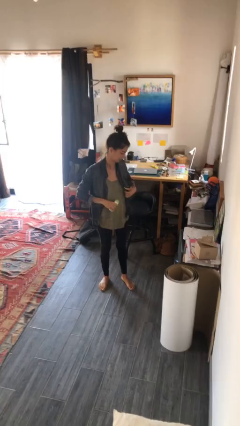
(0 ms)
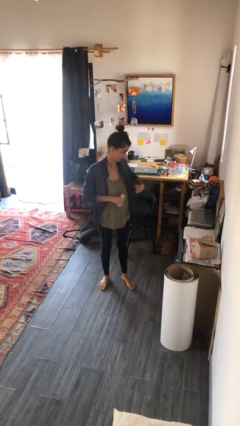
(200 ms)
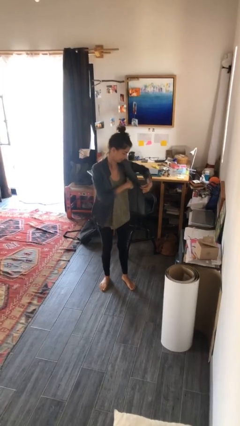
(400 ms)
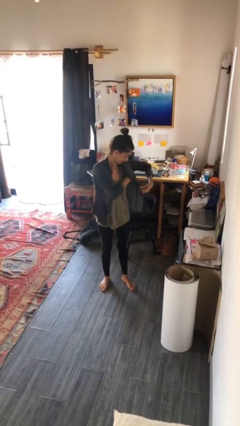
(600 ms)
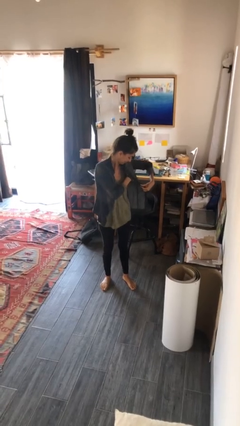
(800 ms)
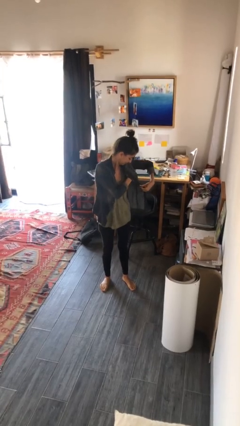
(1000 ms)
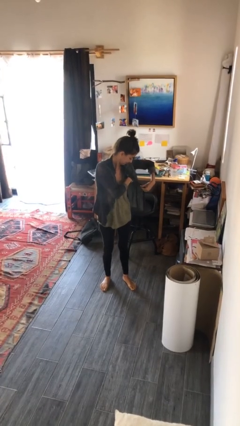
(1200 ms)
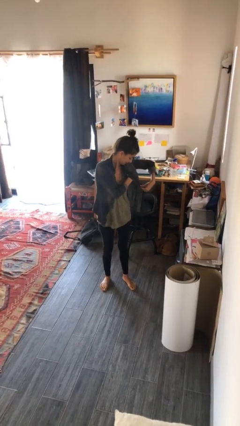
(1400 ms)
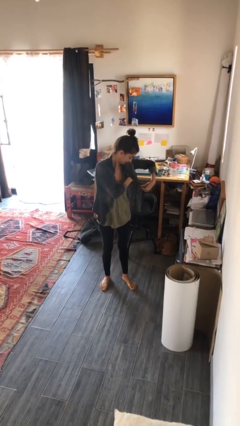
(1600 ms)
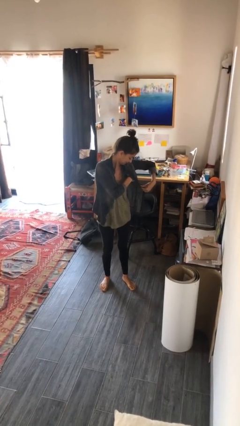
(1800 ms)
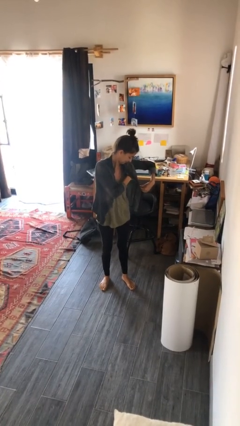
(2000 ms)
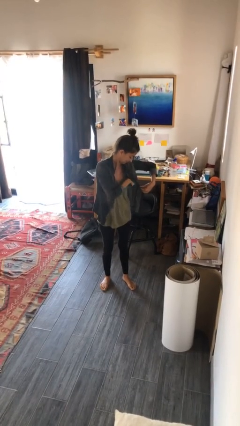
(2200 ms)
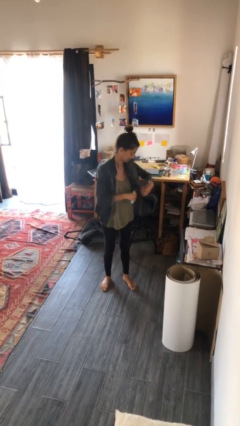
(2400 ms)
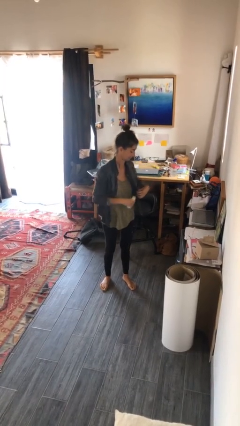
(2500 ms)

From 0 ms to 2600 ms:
person applies deodorant

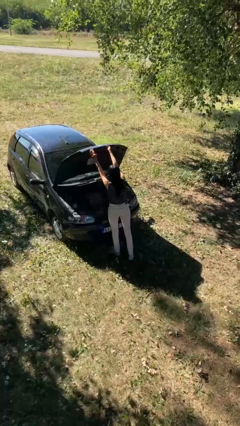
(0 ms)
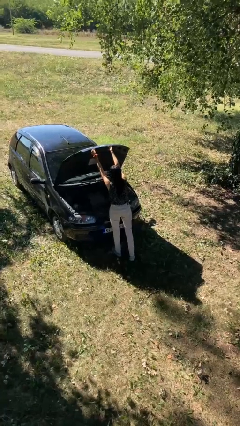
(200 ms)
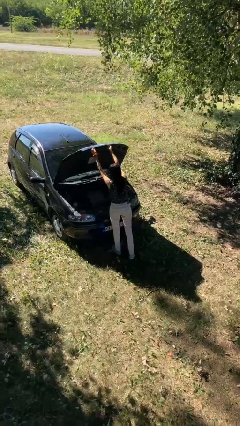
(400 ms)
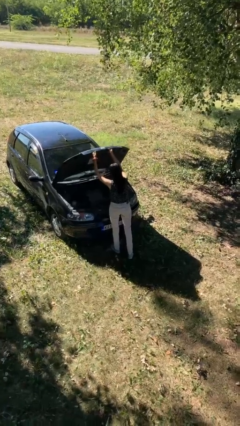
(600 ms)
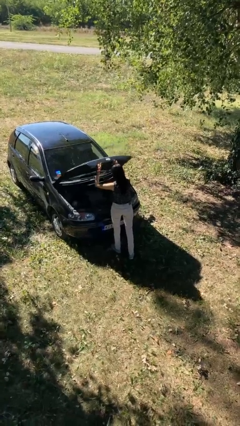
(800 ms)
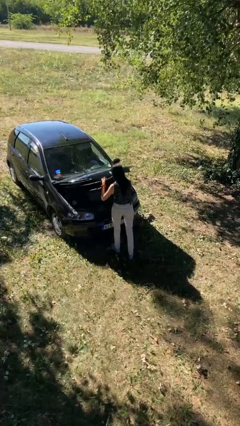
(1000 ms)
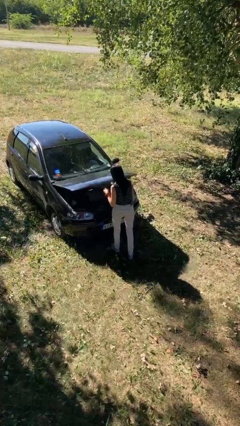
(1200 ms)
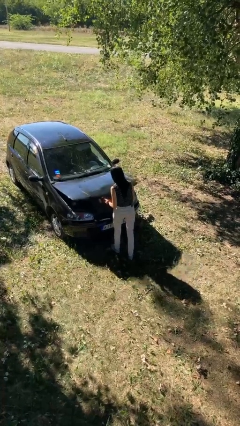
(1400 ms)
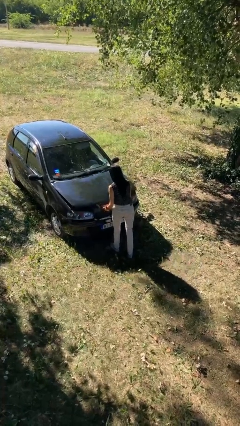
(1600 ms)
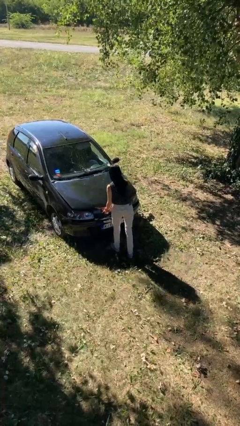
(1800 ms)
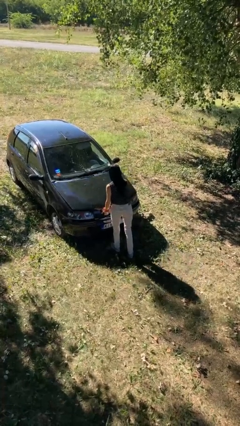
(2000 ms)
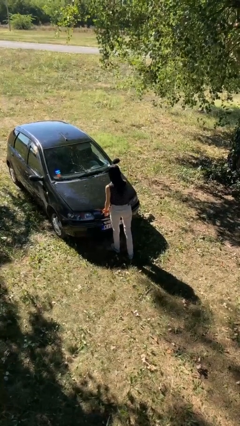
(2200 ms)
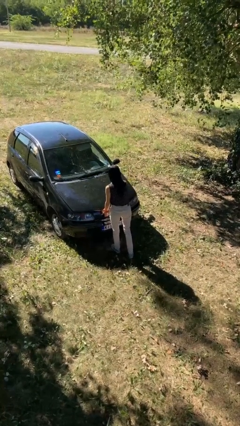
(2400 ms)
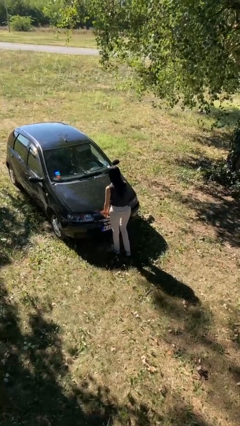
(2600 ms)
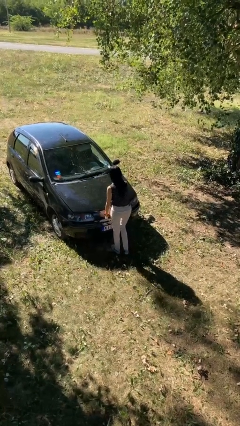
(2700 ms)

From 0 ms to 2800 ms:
person closes car hood

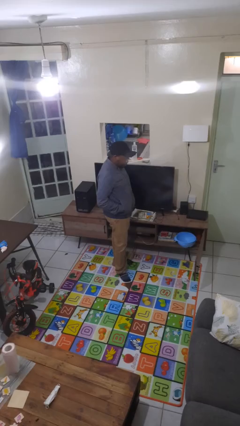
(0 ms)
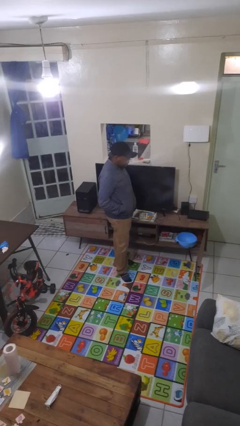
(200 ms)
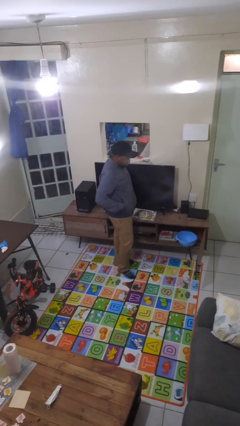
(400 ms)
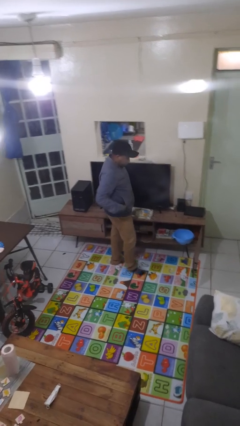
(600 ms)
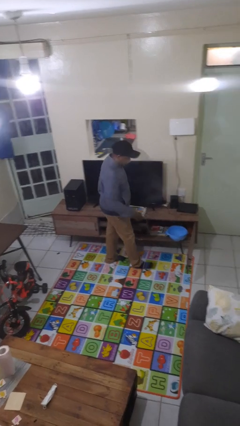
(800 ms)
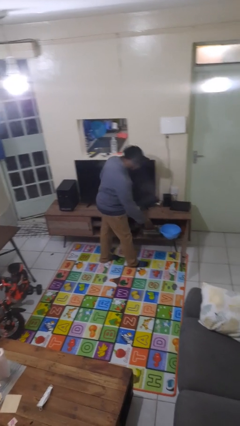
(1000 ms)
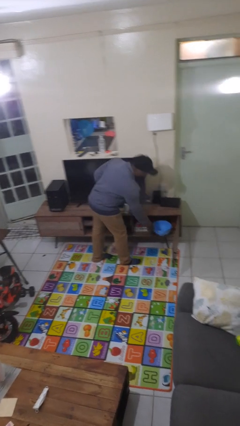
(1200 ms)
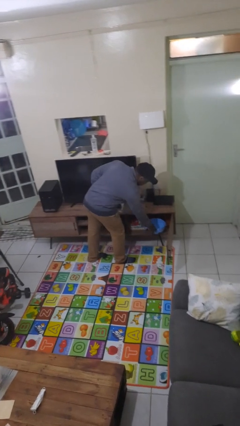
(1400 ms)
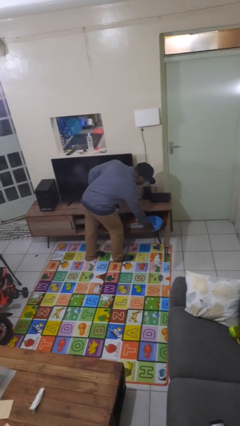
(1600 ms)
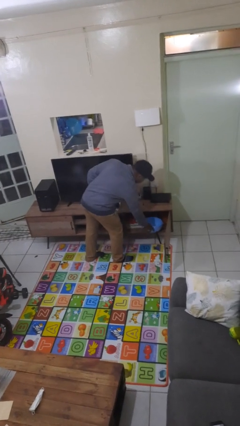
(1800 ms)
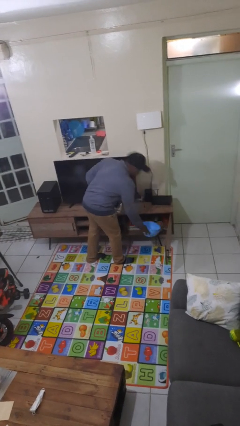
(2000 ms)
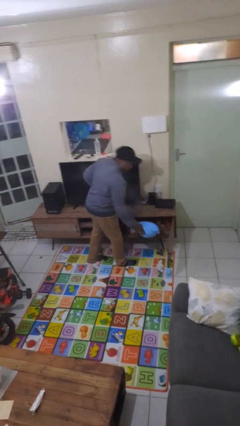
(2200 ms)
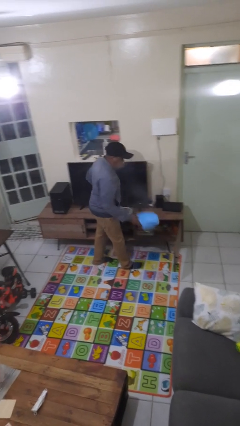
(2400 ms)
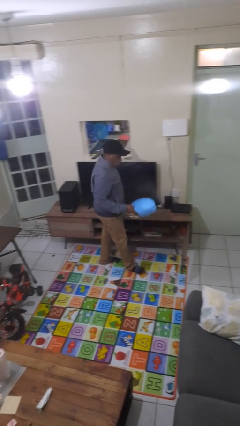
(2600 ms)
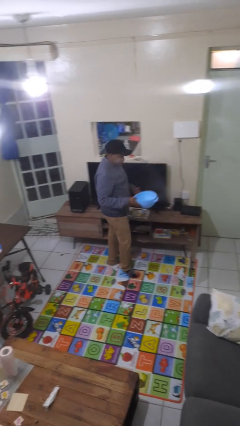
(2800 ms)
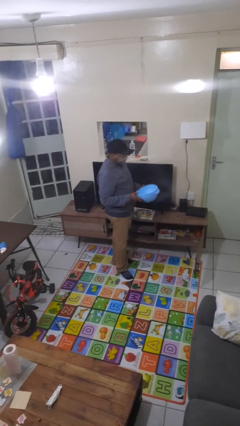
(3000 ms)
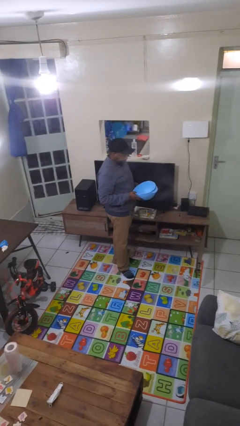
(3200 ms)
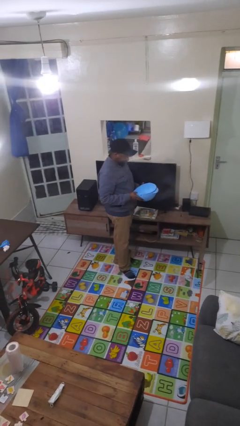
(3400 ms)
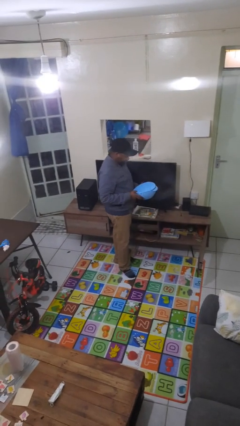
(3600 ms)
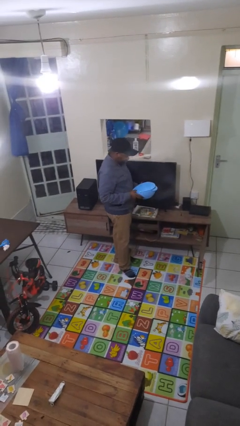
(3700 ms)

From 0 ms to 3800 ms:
person picks up object from cabinet

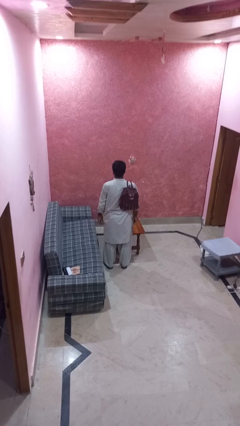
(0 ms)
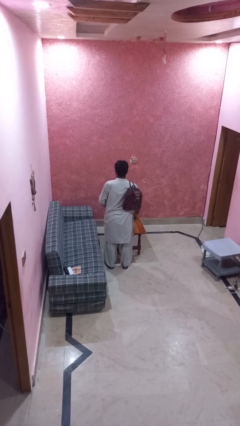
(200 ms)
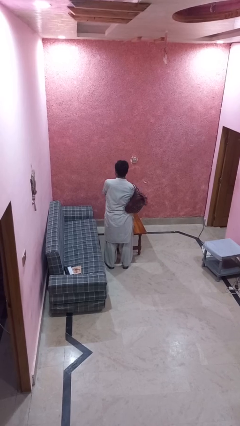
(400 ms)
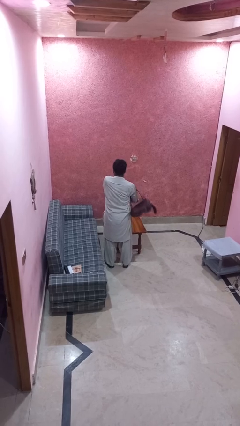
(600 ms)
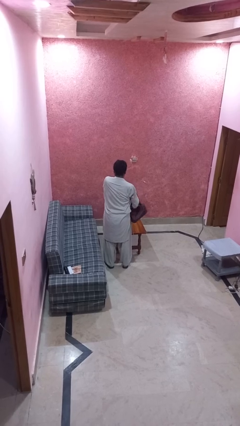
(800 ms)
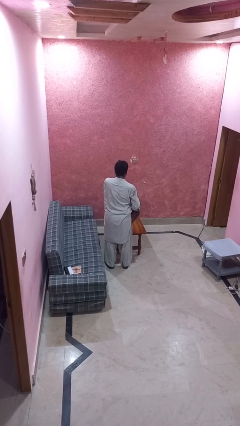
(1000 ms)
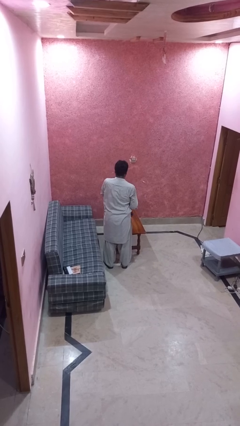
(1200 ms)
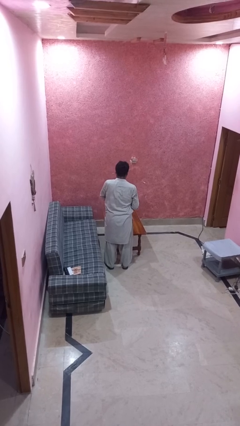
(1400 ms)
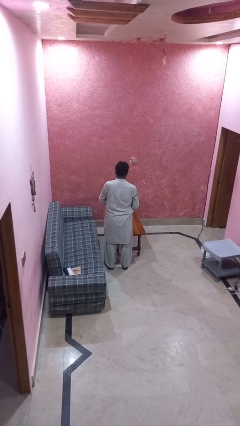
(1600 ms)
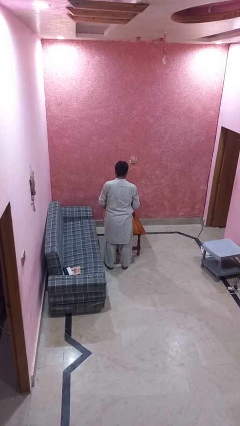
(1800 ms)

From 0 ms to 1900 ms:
person takes off backpack

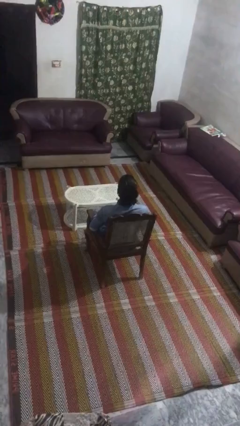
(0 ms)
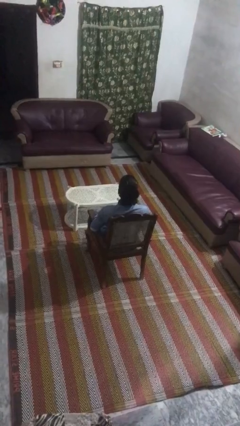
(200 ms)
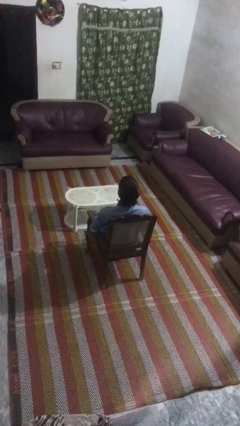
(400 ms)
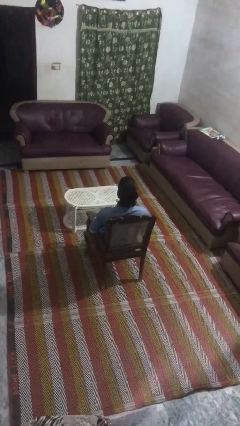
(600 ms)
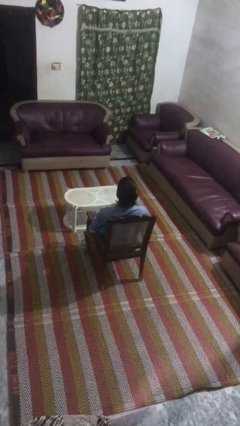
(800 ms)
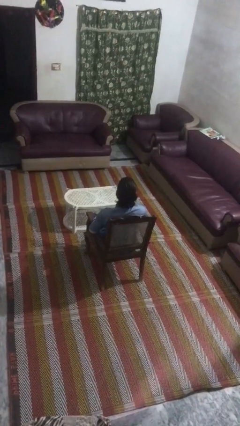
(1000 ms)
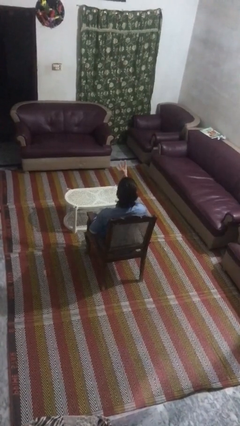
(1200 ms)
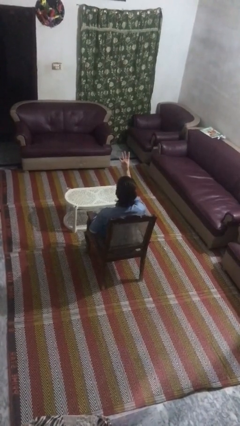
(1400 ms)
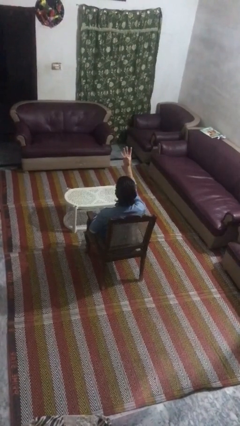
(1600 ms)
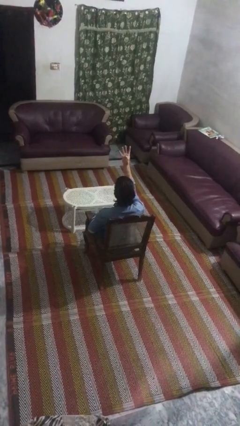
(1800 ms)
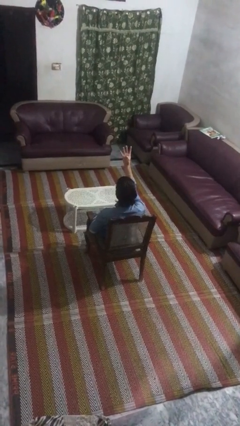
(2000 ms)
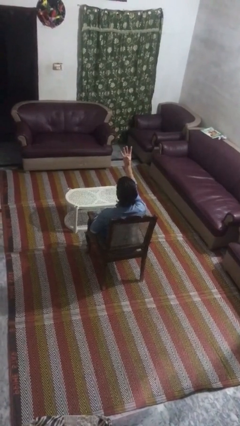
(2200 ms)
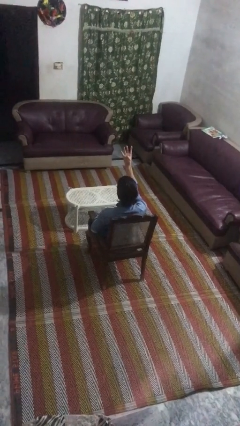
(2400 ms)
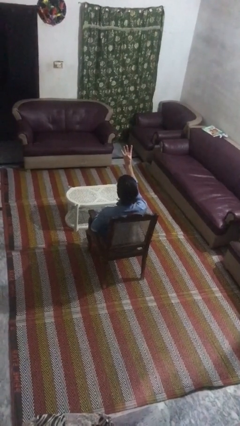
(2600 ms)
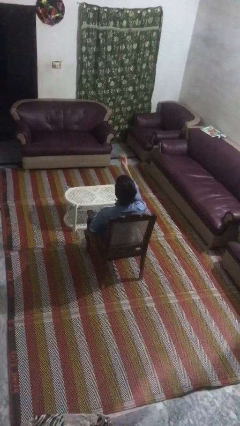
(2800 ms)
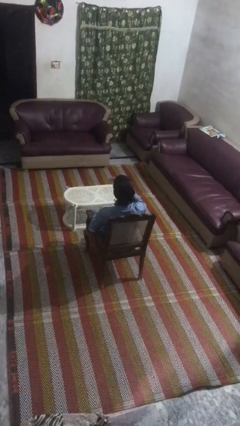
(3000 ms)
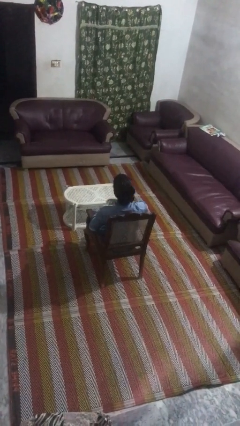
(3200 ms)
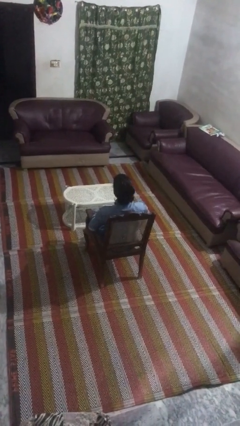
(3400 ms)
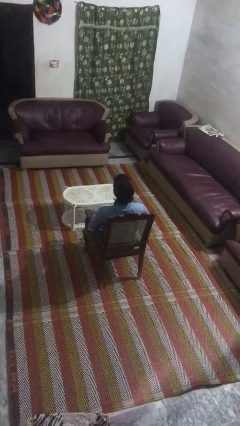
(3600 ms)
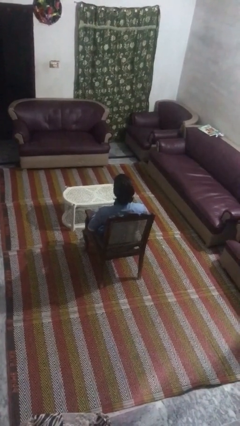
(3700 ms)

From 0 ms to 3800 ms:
person gestures number four

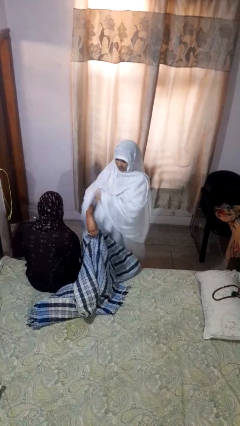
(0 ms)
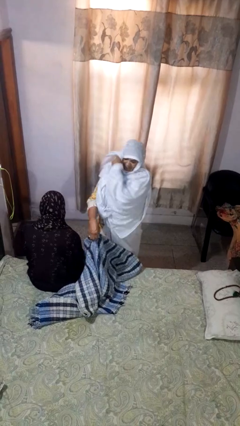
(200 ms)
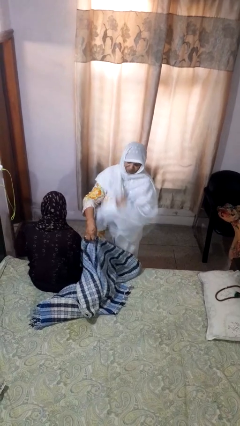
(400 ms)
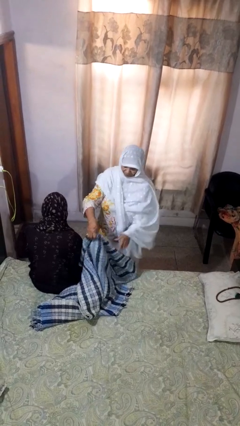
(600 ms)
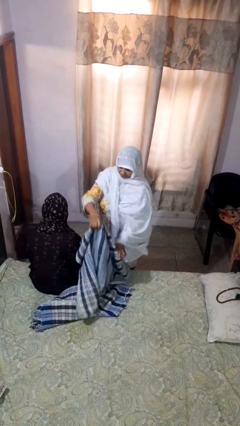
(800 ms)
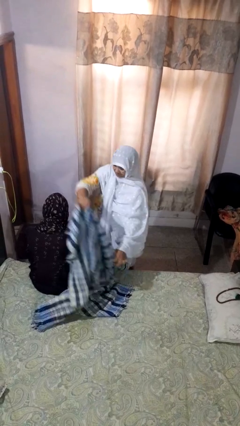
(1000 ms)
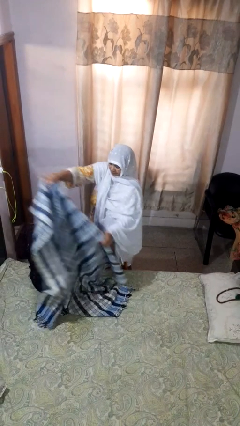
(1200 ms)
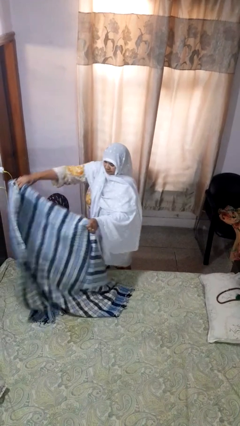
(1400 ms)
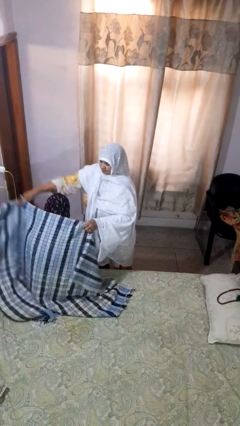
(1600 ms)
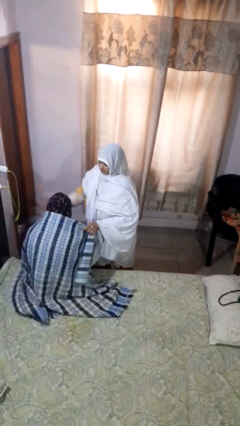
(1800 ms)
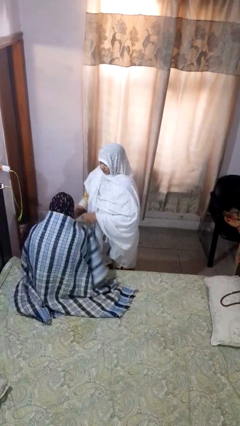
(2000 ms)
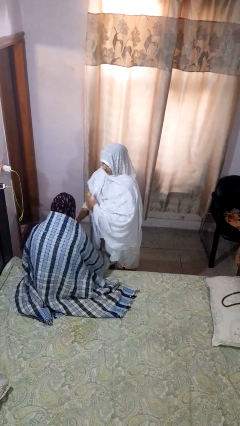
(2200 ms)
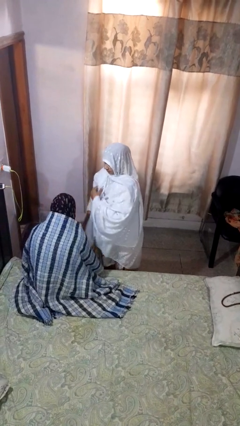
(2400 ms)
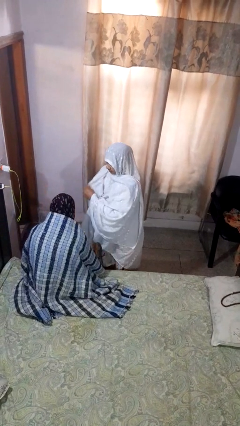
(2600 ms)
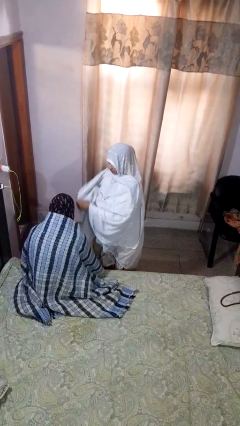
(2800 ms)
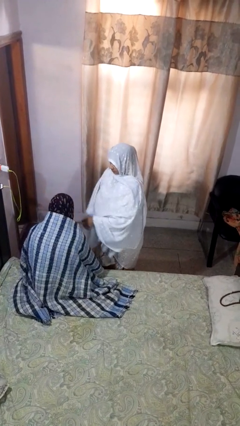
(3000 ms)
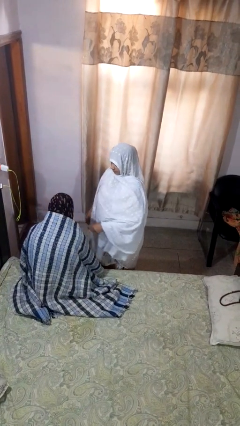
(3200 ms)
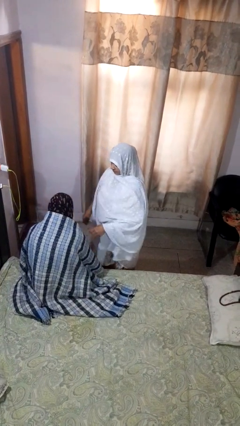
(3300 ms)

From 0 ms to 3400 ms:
person covers friend with blanket
